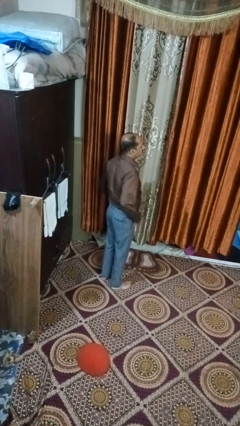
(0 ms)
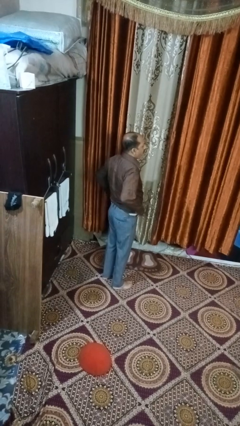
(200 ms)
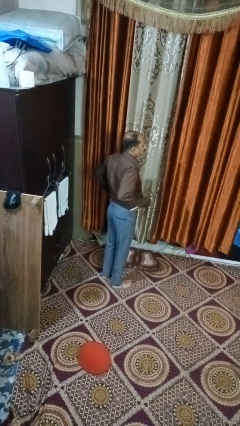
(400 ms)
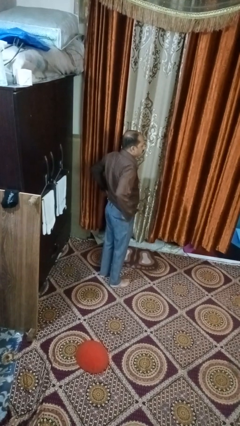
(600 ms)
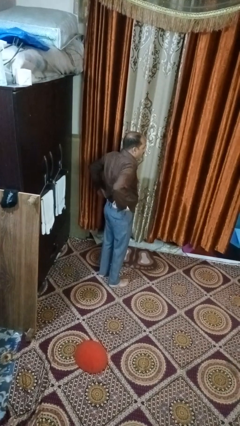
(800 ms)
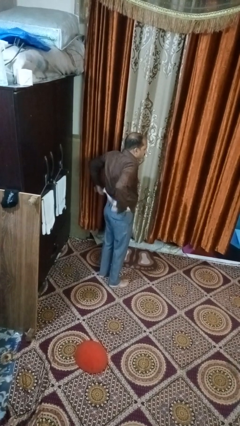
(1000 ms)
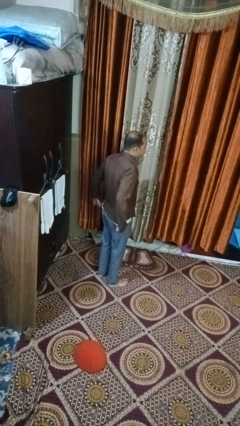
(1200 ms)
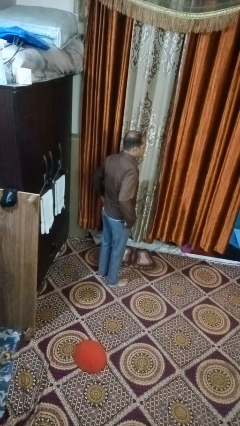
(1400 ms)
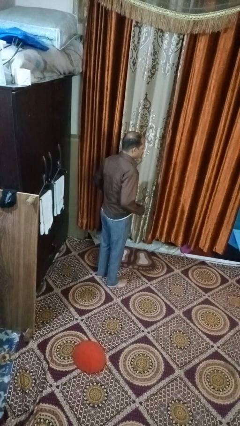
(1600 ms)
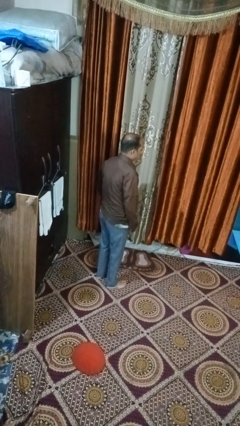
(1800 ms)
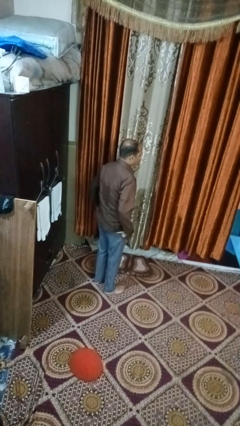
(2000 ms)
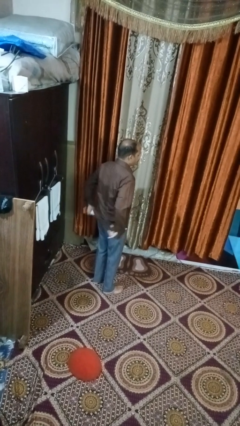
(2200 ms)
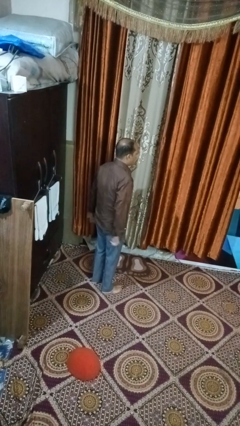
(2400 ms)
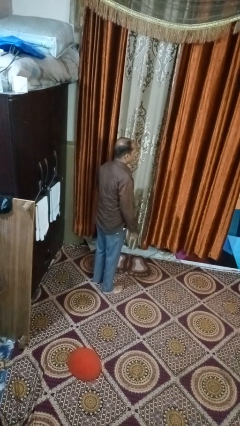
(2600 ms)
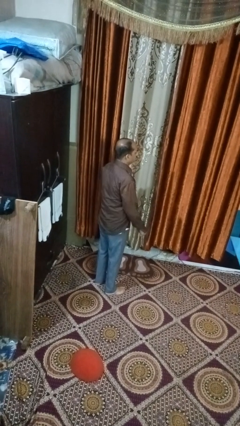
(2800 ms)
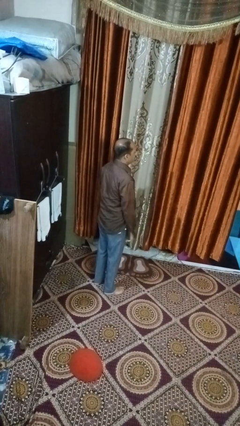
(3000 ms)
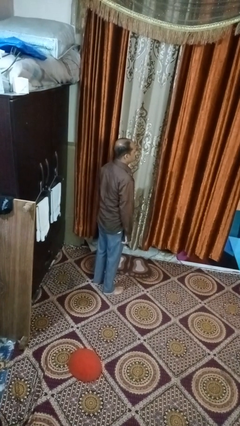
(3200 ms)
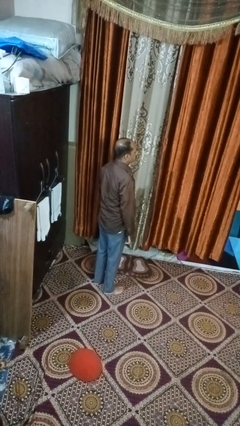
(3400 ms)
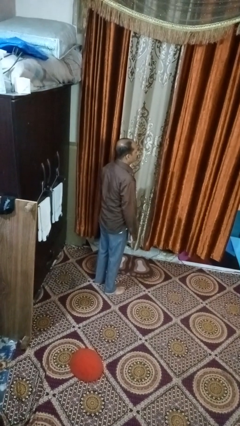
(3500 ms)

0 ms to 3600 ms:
person untucks shirt

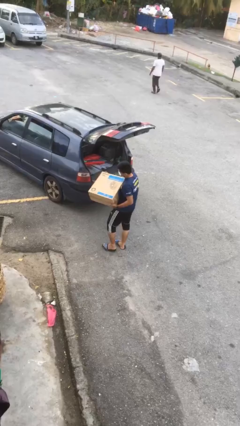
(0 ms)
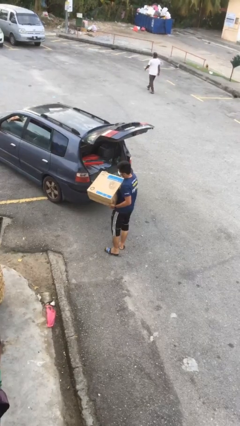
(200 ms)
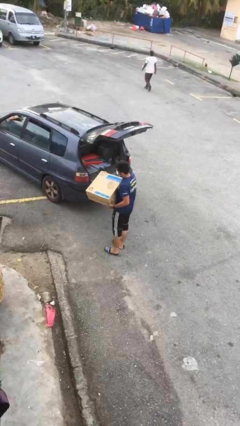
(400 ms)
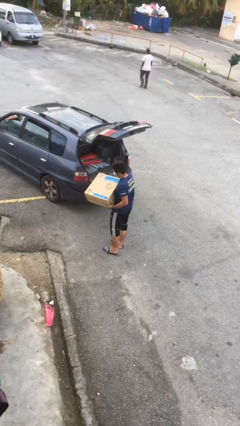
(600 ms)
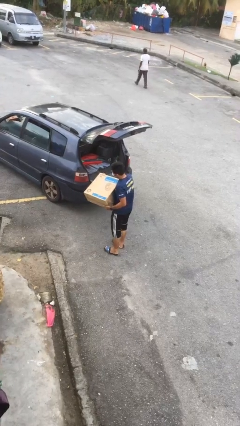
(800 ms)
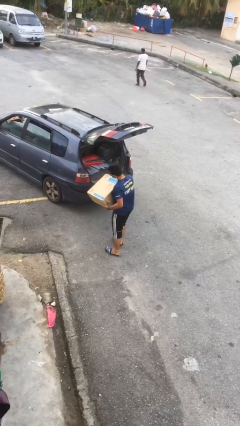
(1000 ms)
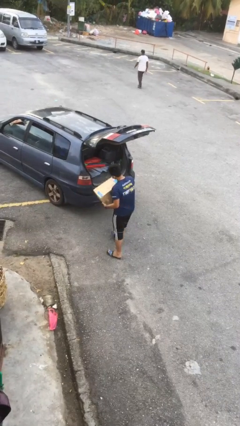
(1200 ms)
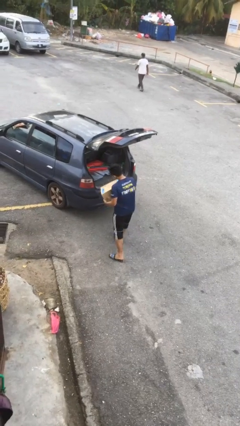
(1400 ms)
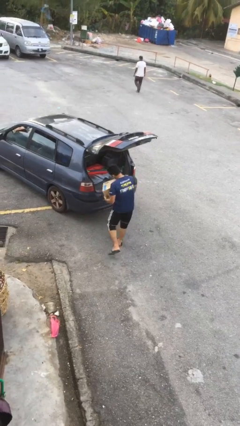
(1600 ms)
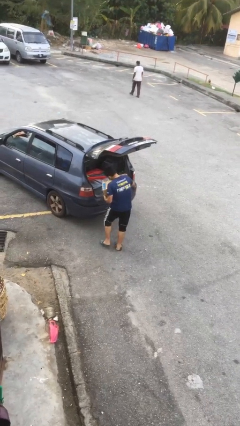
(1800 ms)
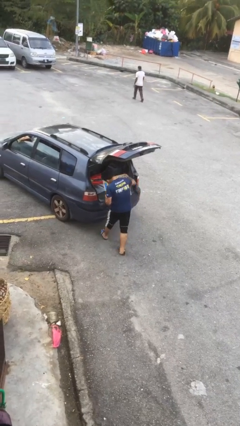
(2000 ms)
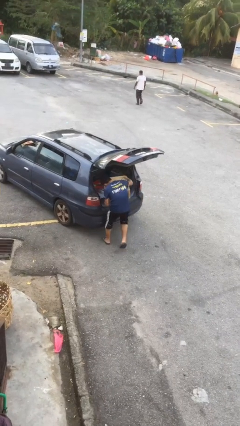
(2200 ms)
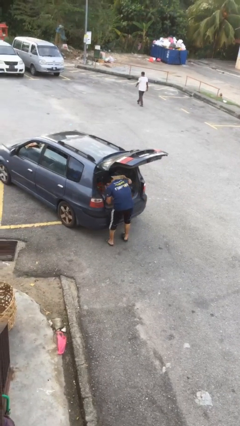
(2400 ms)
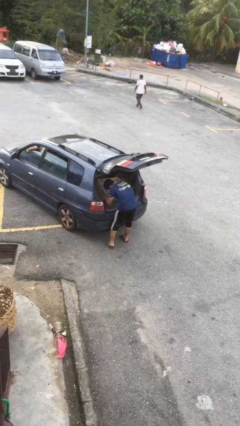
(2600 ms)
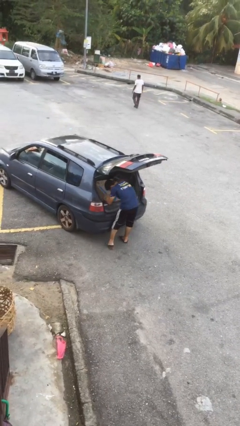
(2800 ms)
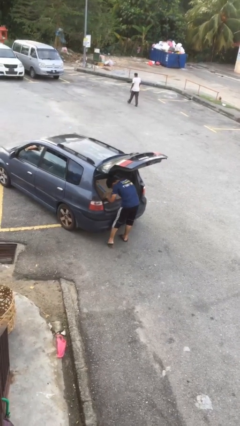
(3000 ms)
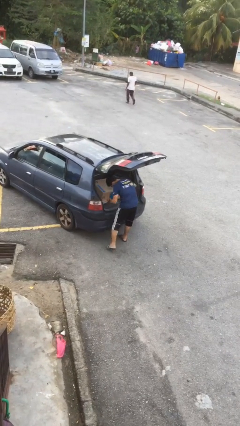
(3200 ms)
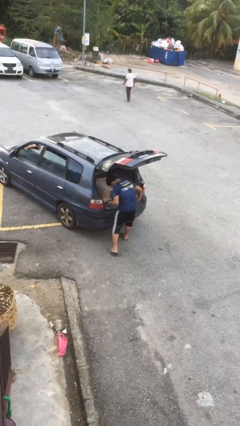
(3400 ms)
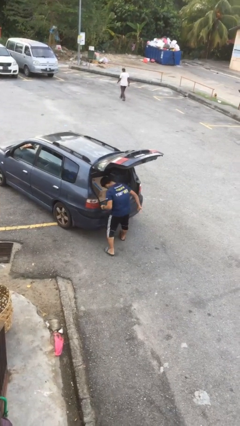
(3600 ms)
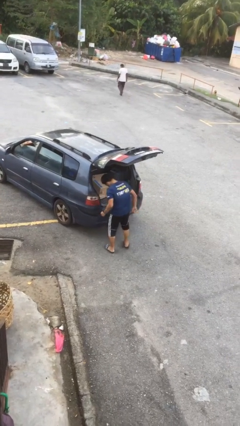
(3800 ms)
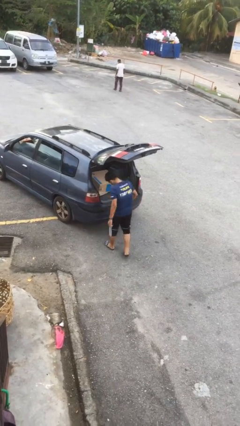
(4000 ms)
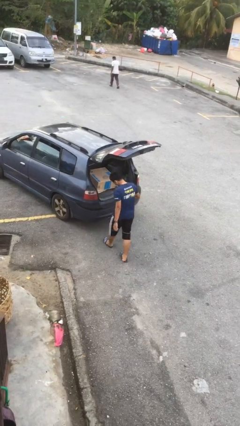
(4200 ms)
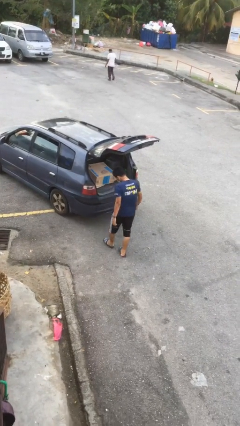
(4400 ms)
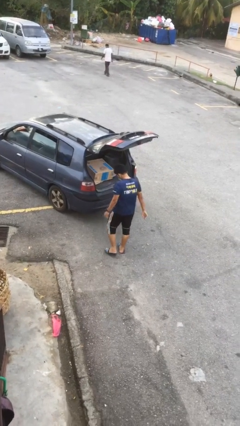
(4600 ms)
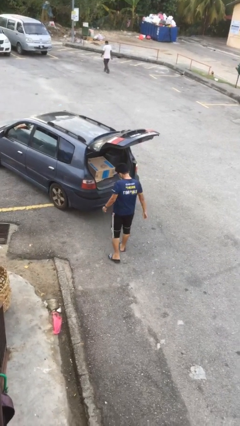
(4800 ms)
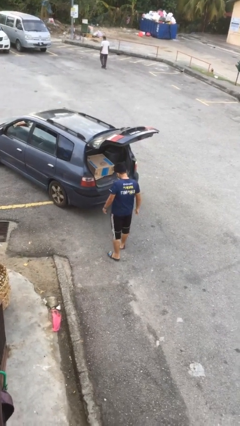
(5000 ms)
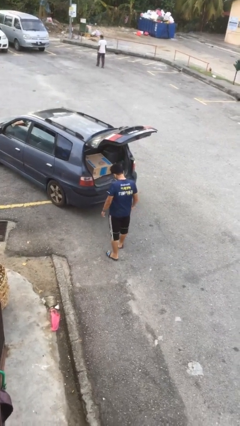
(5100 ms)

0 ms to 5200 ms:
person loads car

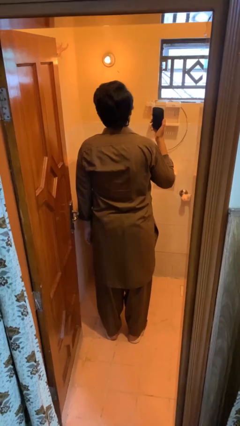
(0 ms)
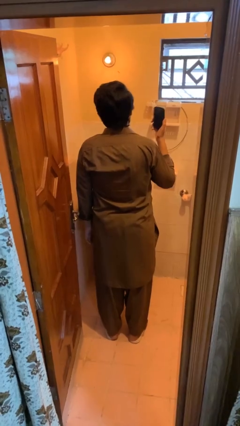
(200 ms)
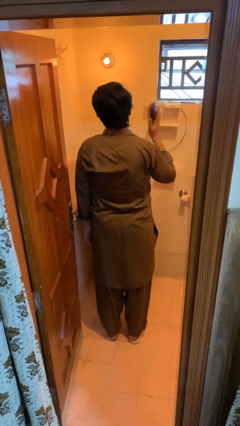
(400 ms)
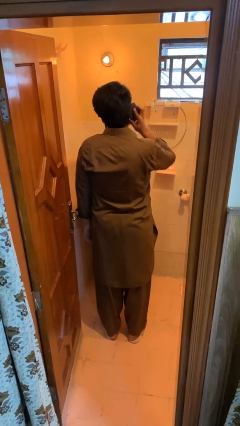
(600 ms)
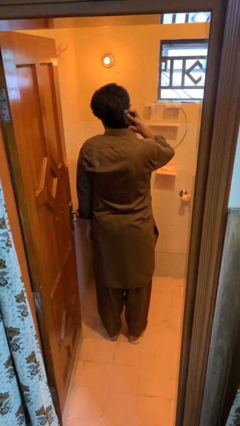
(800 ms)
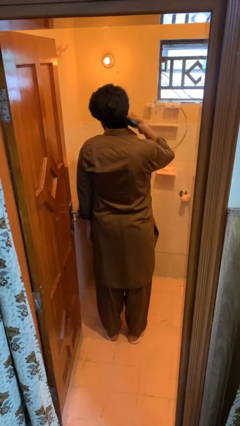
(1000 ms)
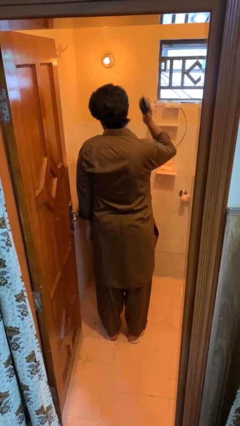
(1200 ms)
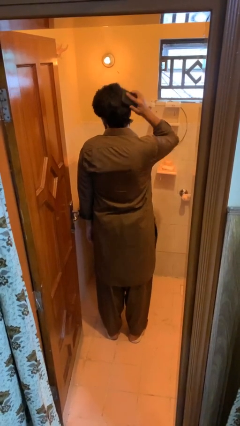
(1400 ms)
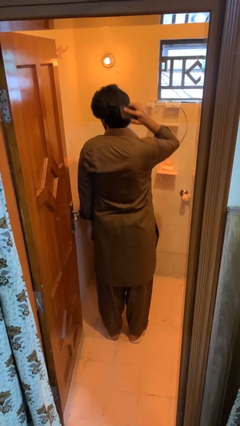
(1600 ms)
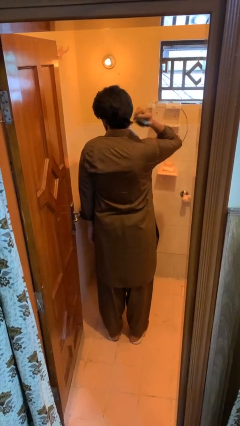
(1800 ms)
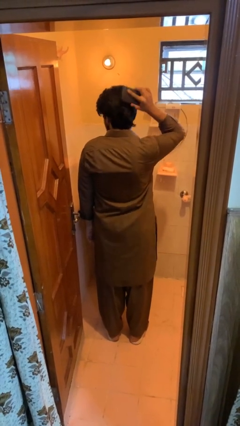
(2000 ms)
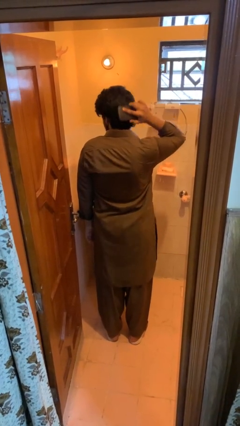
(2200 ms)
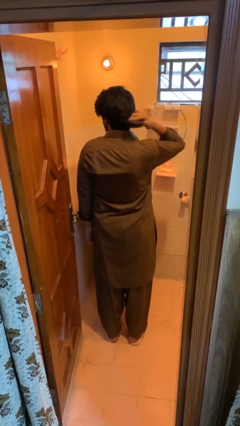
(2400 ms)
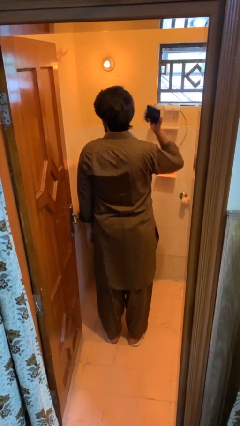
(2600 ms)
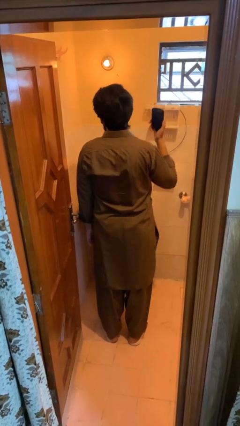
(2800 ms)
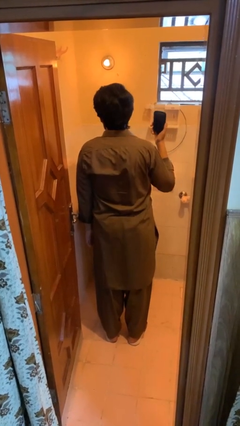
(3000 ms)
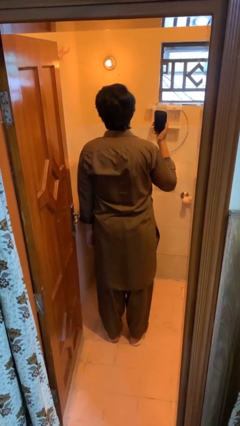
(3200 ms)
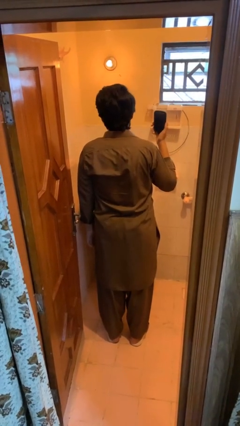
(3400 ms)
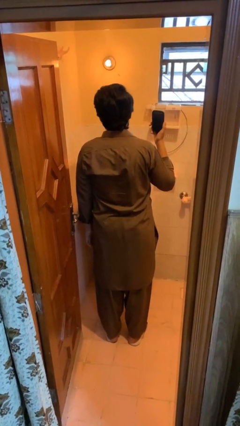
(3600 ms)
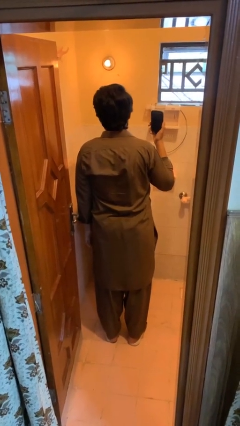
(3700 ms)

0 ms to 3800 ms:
person brushes hair

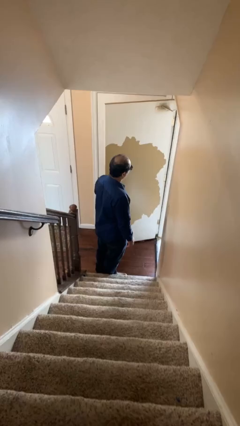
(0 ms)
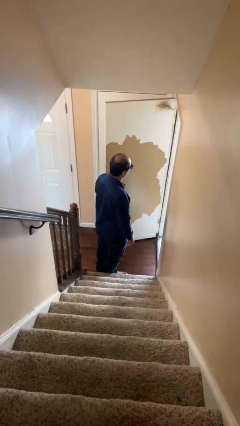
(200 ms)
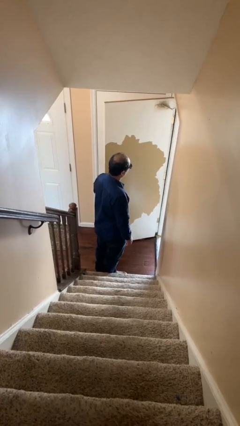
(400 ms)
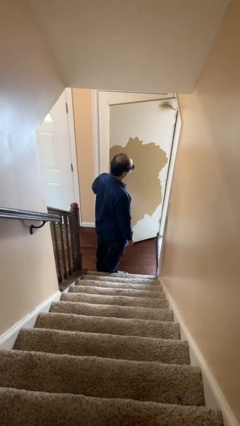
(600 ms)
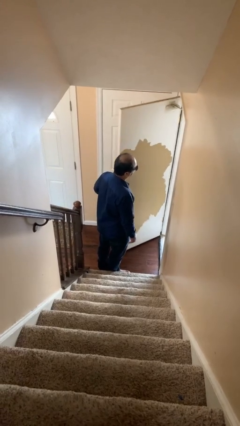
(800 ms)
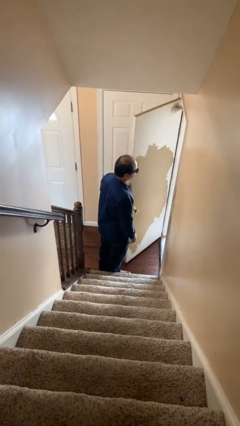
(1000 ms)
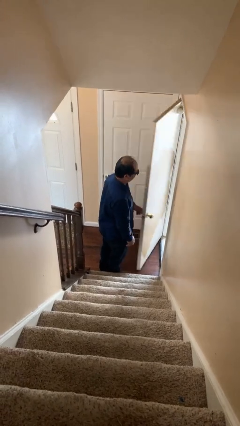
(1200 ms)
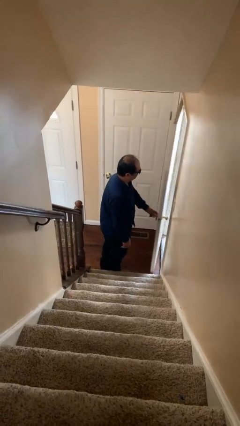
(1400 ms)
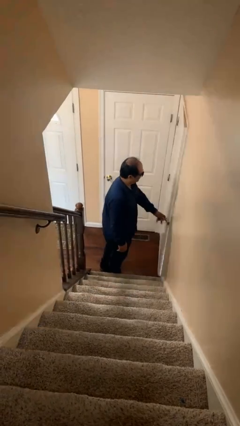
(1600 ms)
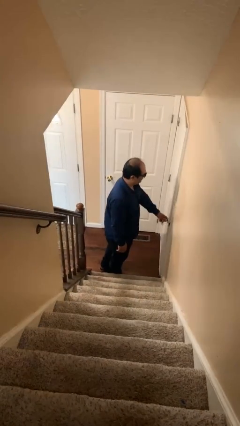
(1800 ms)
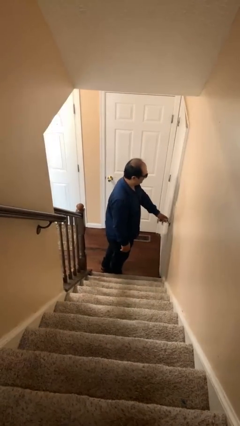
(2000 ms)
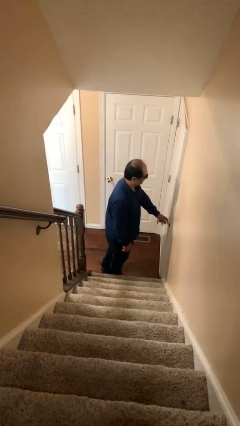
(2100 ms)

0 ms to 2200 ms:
person closes facility door

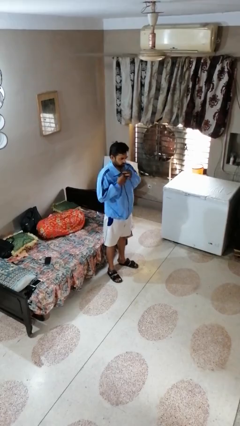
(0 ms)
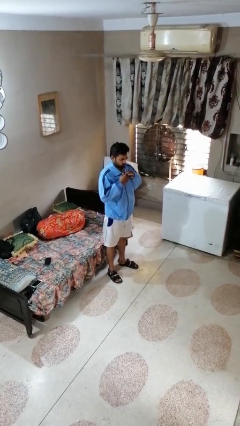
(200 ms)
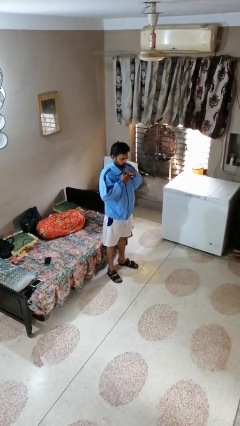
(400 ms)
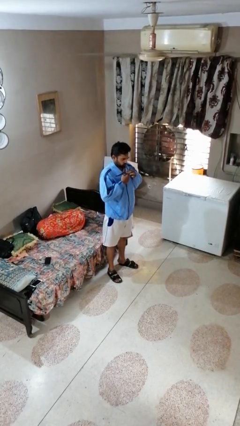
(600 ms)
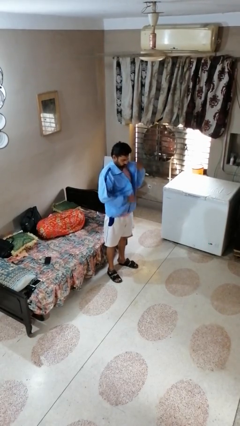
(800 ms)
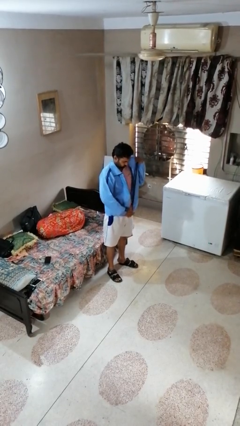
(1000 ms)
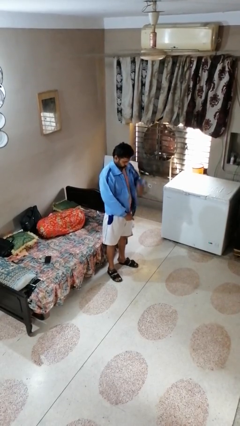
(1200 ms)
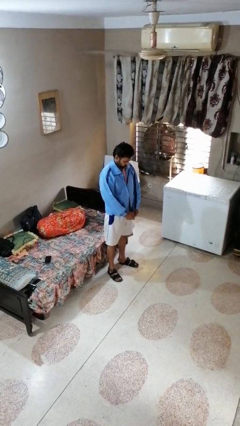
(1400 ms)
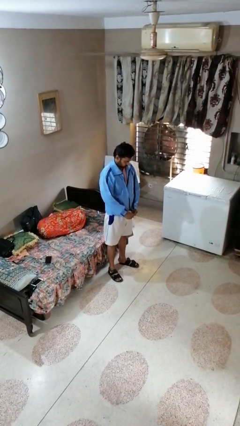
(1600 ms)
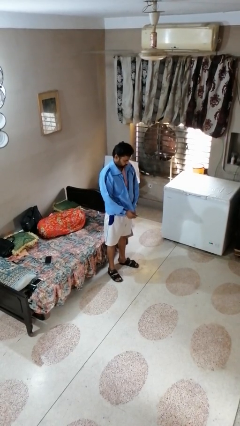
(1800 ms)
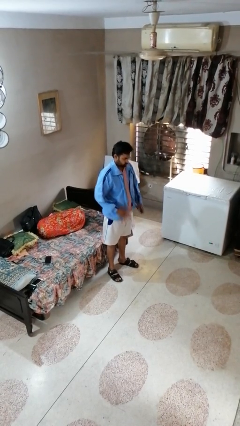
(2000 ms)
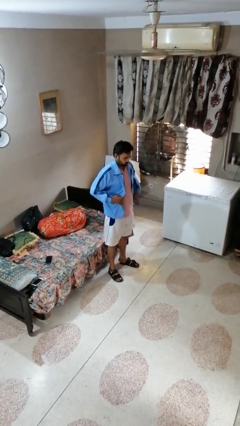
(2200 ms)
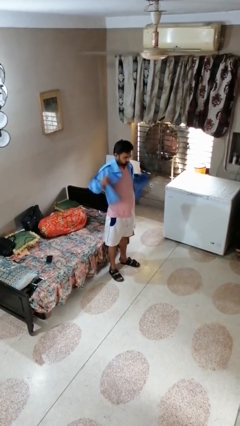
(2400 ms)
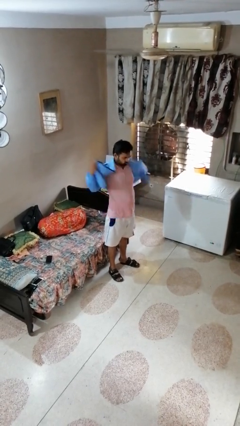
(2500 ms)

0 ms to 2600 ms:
person unzips jacket
